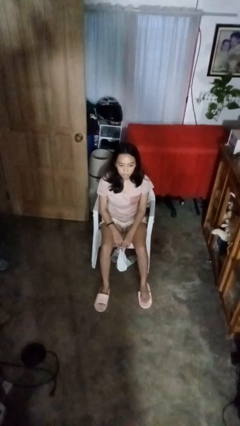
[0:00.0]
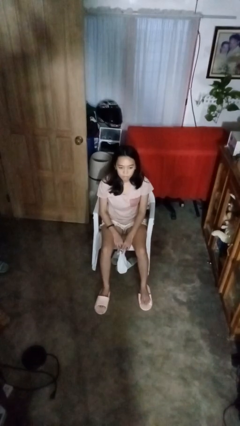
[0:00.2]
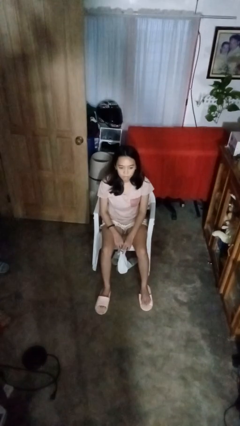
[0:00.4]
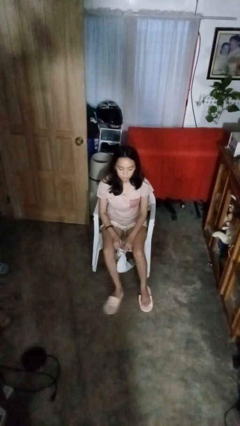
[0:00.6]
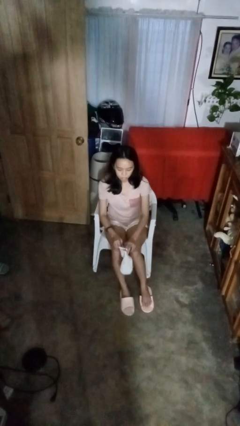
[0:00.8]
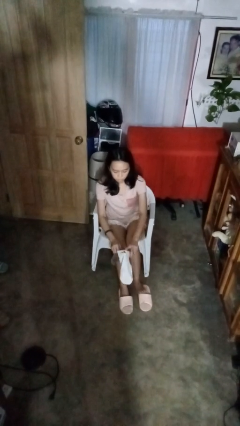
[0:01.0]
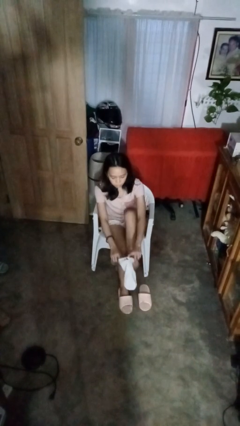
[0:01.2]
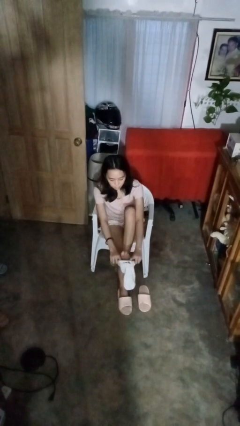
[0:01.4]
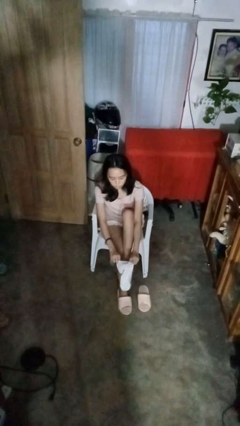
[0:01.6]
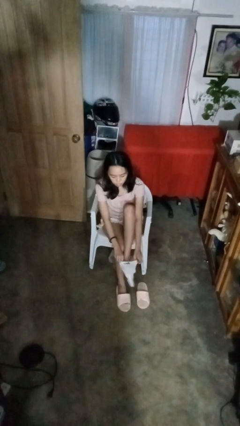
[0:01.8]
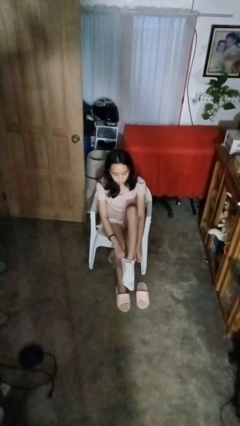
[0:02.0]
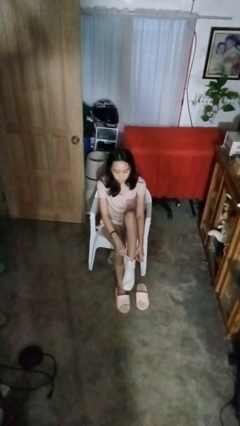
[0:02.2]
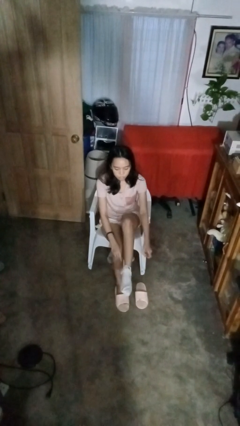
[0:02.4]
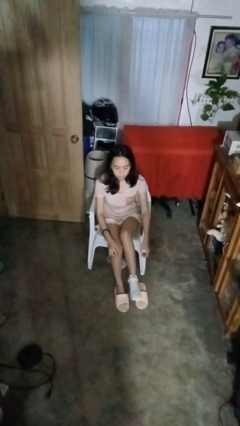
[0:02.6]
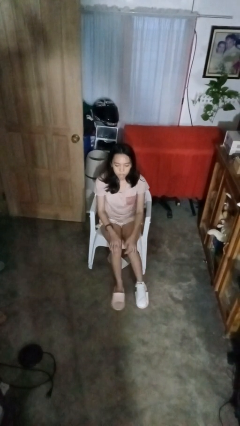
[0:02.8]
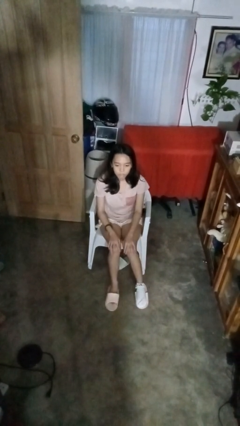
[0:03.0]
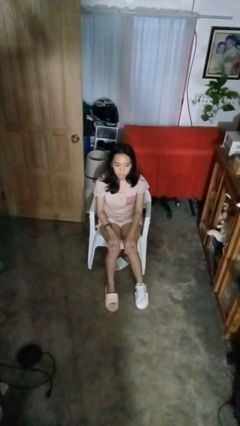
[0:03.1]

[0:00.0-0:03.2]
person puts on socks

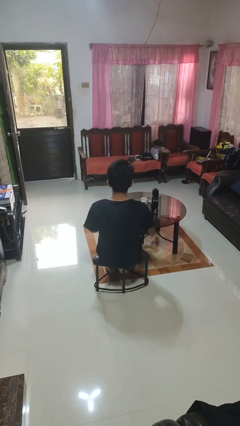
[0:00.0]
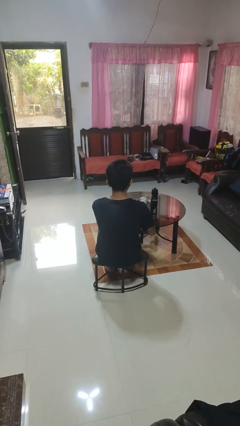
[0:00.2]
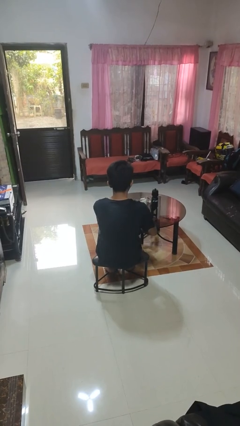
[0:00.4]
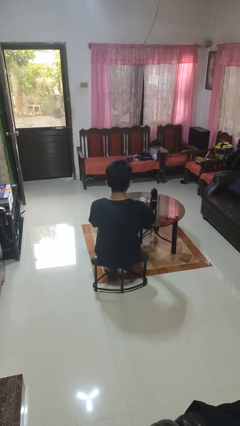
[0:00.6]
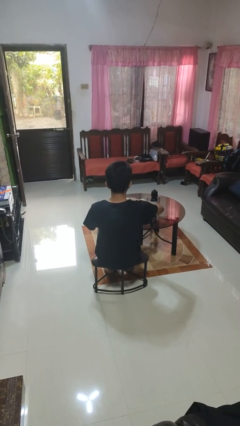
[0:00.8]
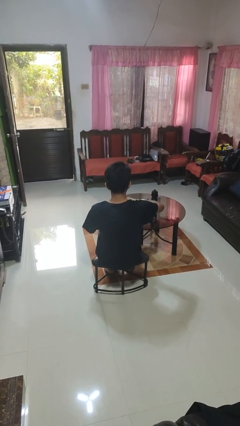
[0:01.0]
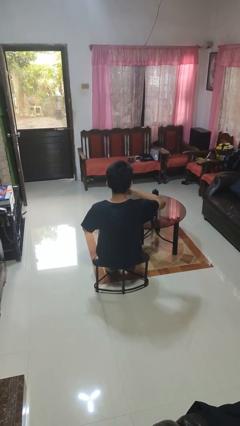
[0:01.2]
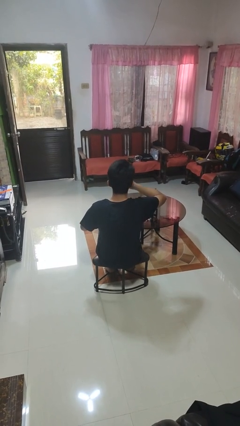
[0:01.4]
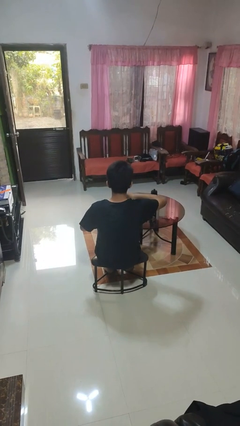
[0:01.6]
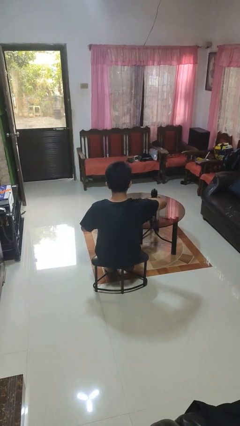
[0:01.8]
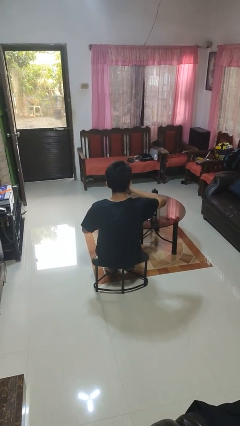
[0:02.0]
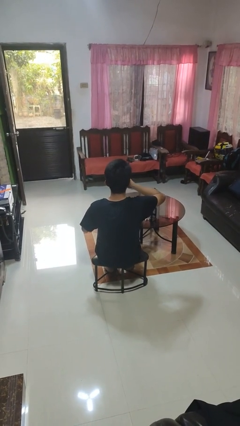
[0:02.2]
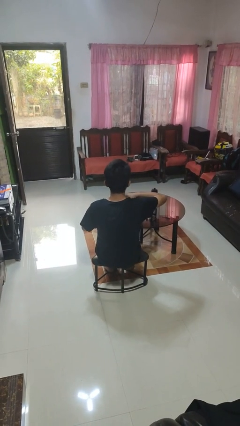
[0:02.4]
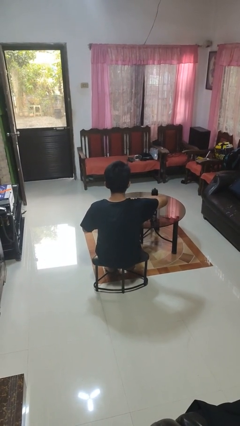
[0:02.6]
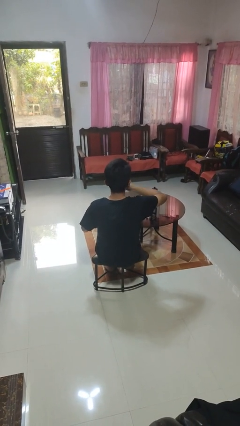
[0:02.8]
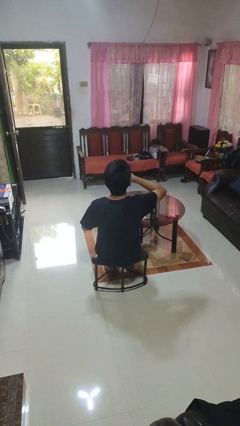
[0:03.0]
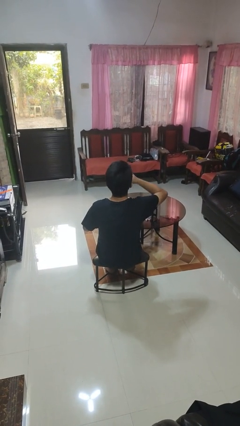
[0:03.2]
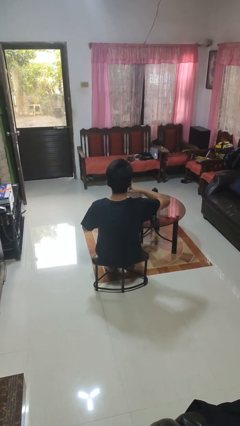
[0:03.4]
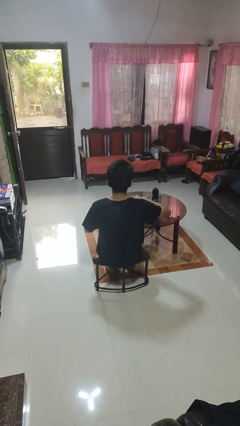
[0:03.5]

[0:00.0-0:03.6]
person eats with hands

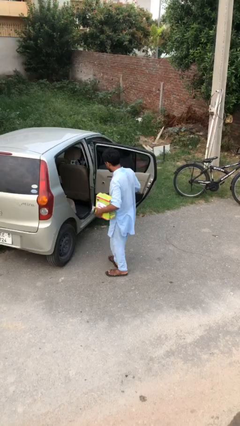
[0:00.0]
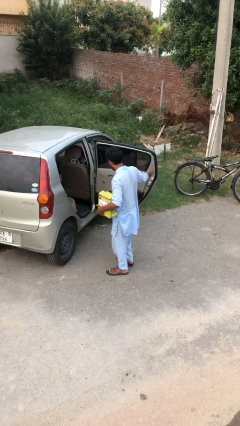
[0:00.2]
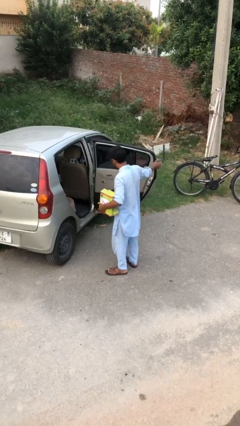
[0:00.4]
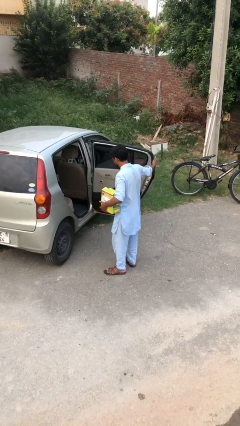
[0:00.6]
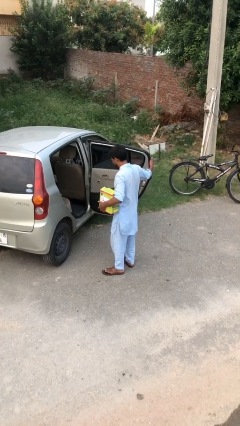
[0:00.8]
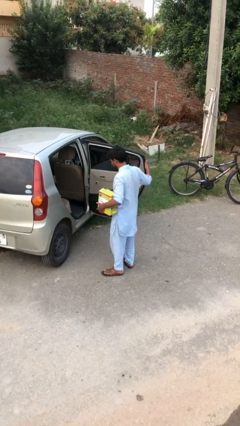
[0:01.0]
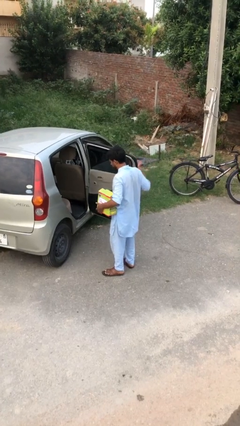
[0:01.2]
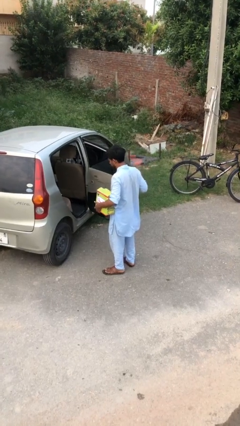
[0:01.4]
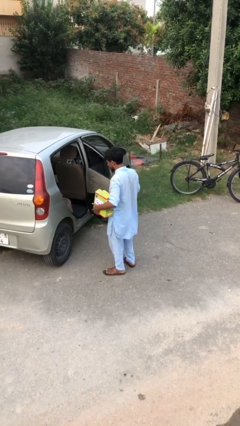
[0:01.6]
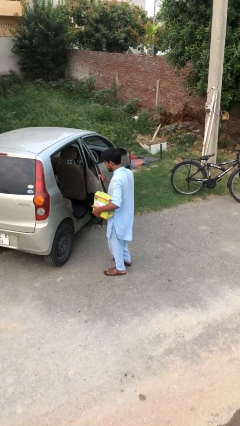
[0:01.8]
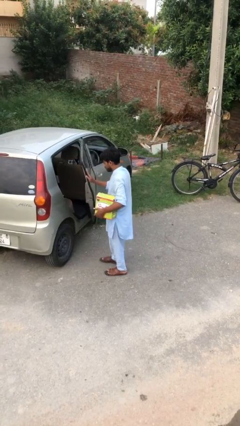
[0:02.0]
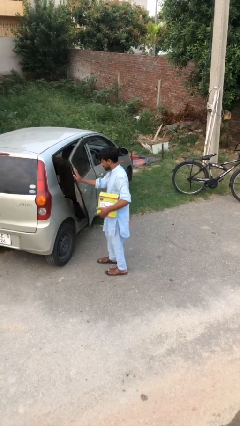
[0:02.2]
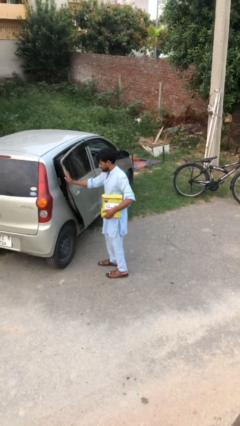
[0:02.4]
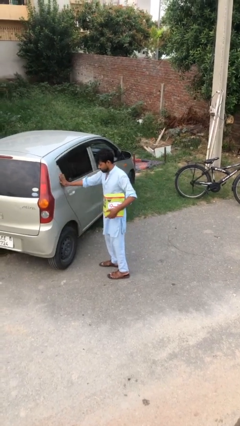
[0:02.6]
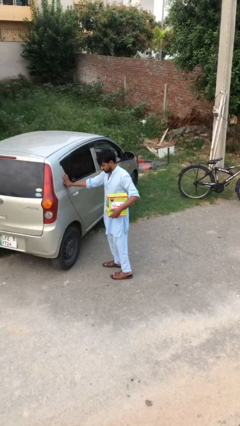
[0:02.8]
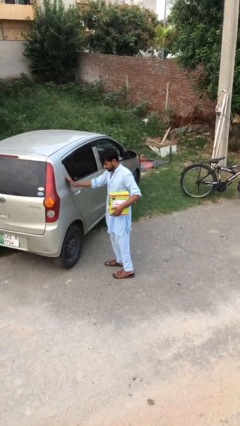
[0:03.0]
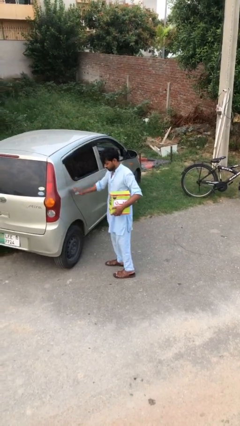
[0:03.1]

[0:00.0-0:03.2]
person closes car door

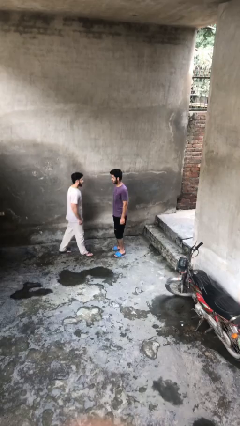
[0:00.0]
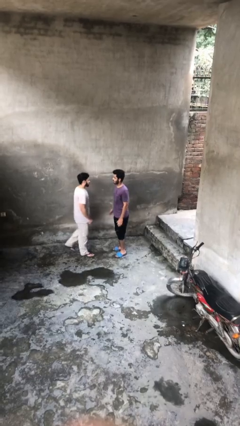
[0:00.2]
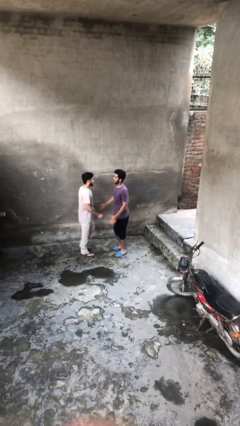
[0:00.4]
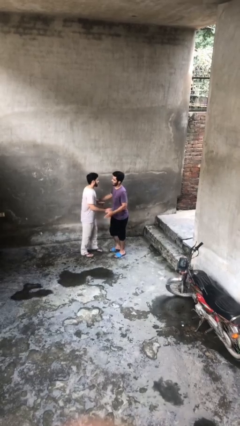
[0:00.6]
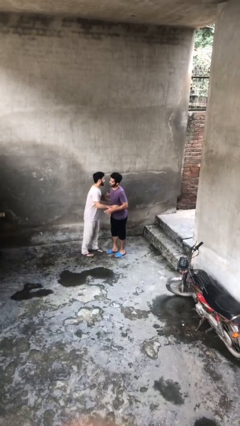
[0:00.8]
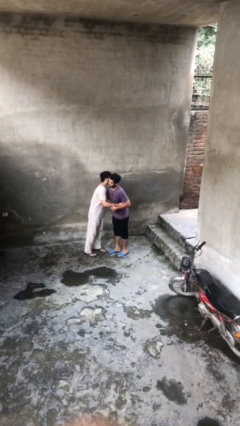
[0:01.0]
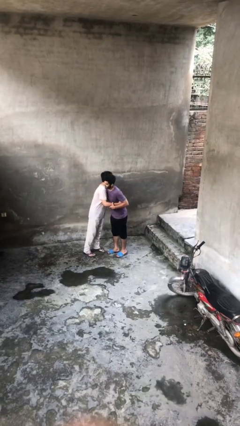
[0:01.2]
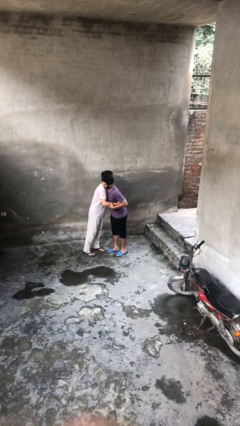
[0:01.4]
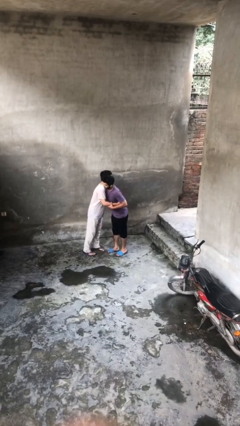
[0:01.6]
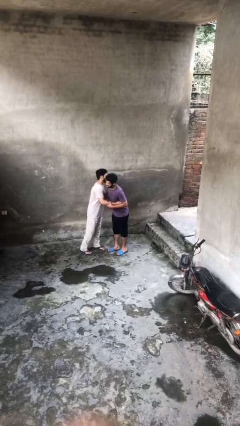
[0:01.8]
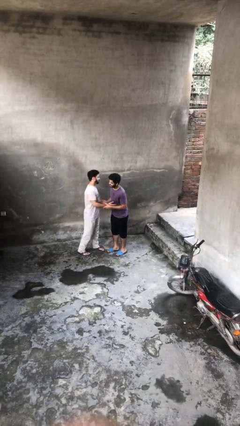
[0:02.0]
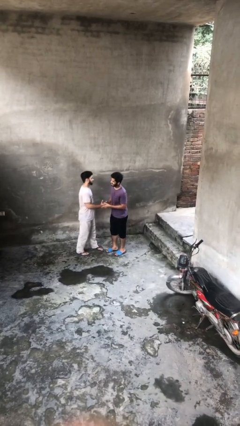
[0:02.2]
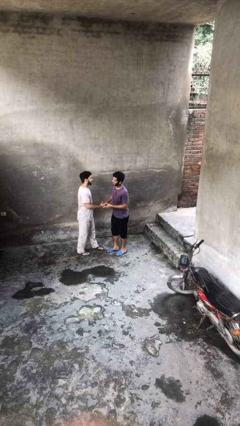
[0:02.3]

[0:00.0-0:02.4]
person embraces person

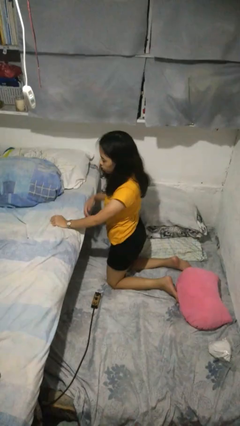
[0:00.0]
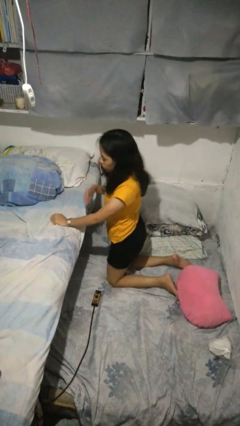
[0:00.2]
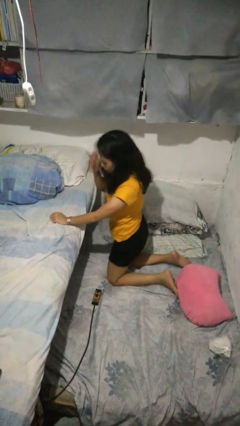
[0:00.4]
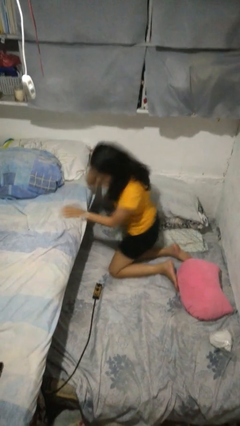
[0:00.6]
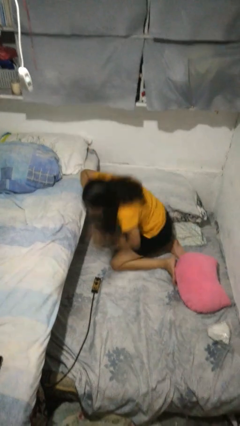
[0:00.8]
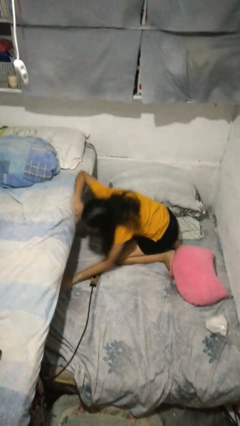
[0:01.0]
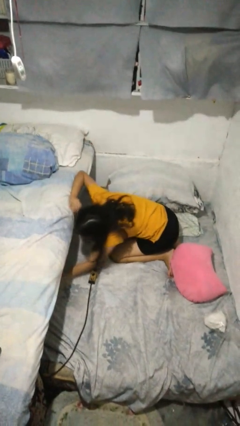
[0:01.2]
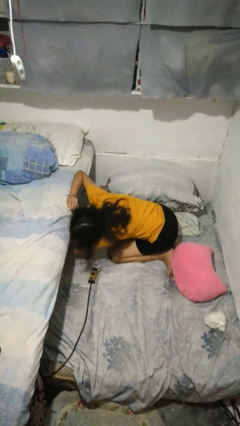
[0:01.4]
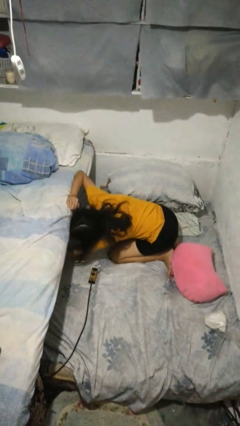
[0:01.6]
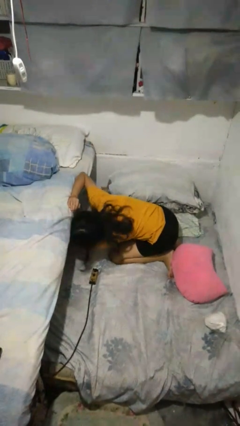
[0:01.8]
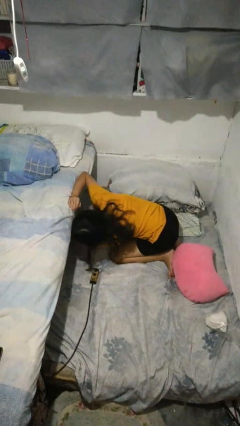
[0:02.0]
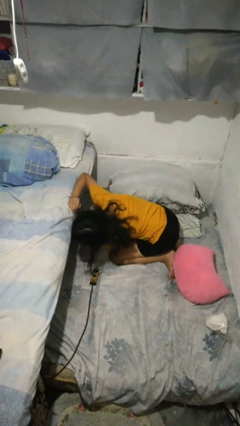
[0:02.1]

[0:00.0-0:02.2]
person searches under bed

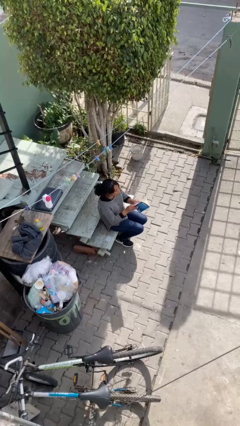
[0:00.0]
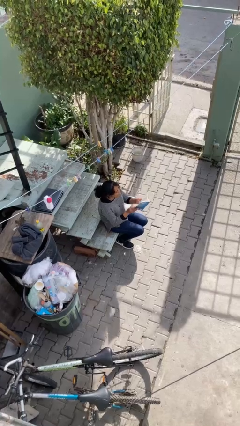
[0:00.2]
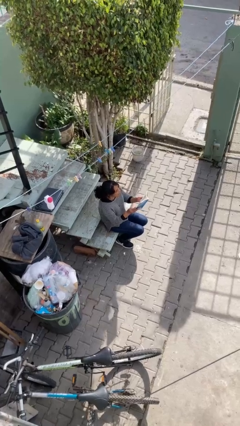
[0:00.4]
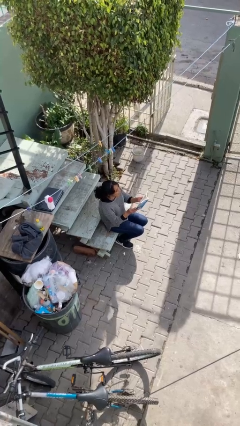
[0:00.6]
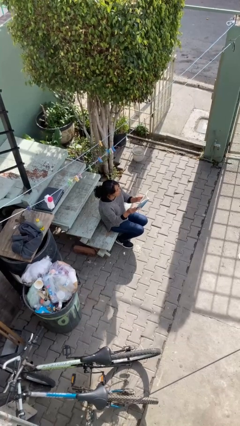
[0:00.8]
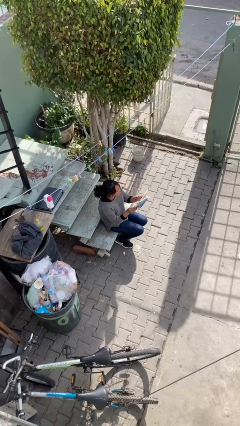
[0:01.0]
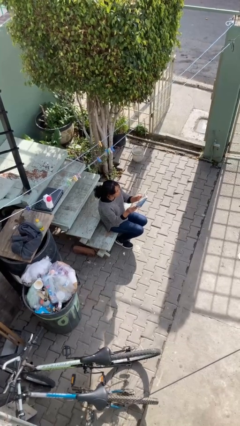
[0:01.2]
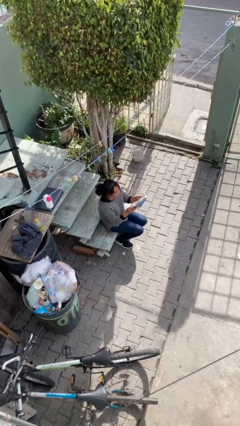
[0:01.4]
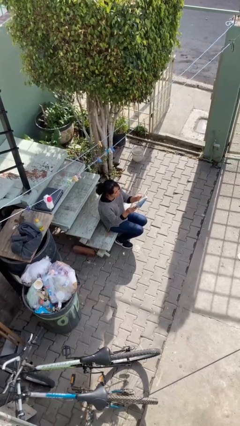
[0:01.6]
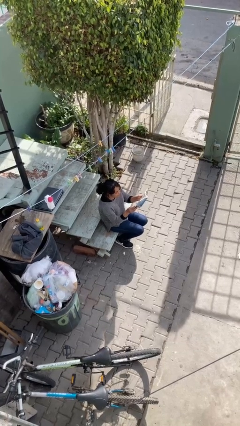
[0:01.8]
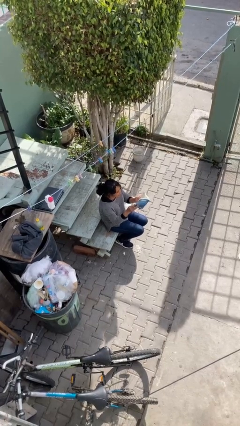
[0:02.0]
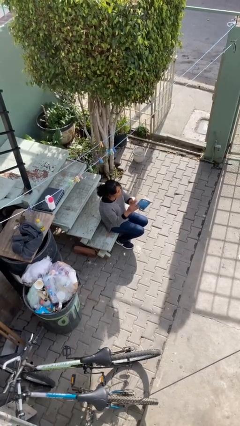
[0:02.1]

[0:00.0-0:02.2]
person reads document

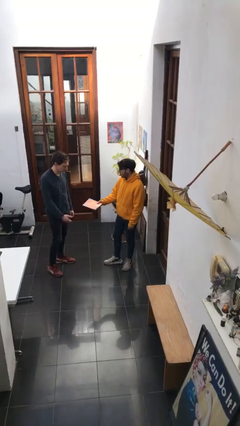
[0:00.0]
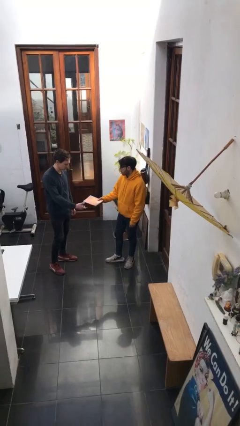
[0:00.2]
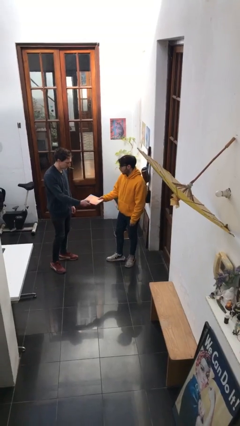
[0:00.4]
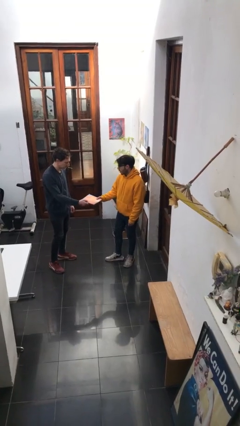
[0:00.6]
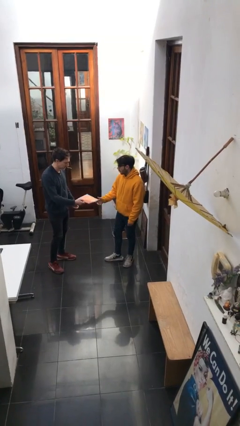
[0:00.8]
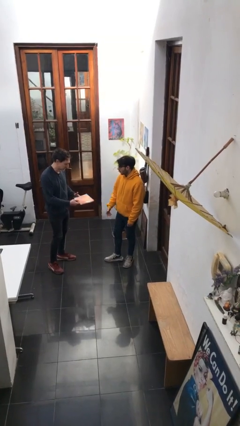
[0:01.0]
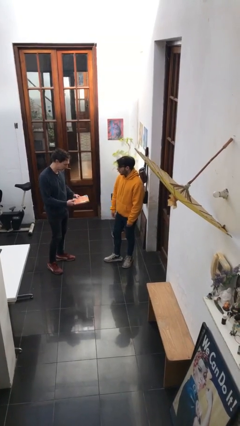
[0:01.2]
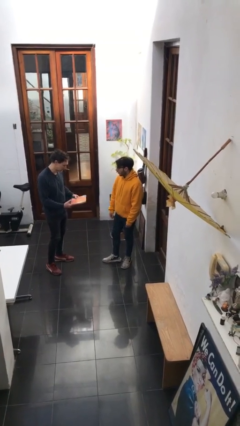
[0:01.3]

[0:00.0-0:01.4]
person transfers object to person
